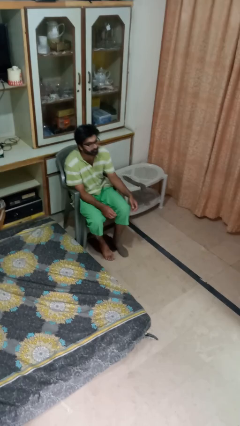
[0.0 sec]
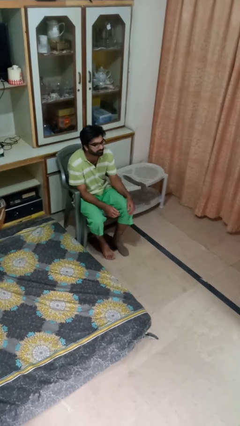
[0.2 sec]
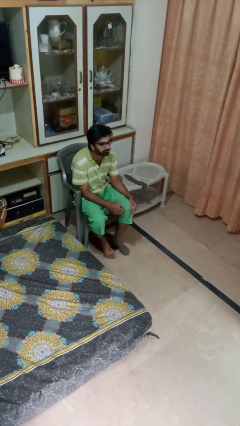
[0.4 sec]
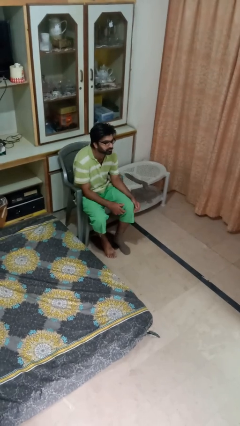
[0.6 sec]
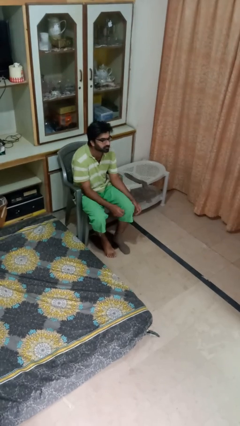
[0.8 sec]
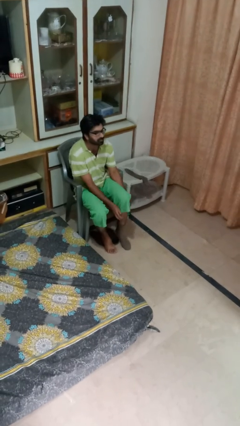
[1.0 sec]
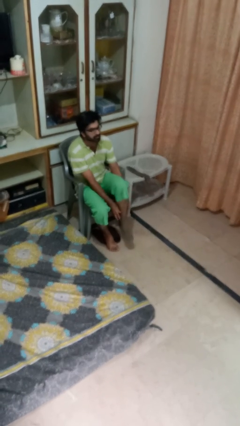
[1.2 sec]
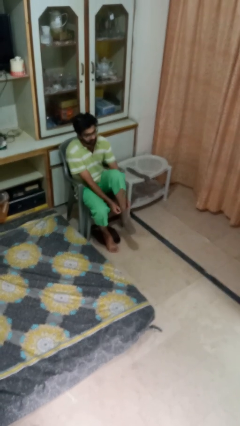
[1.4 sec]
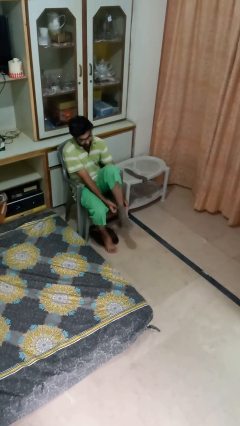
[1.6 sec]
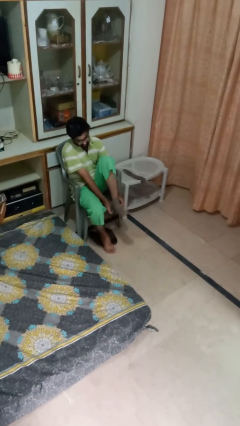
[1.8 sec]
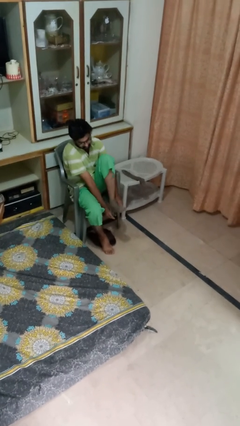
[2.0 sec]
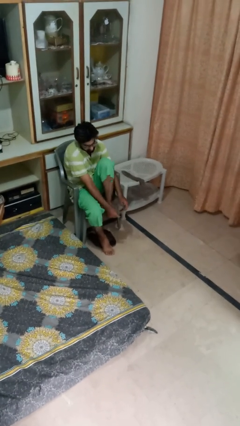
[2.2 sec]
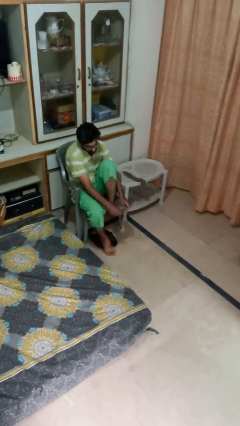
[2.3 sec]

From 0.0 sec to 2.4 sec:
person takes off socks

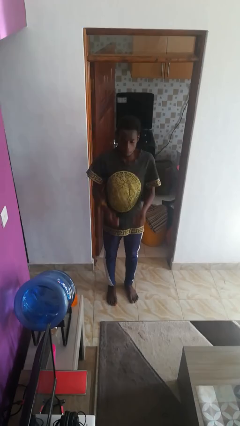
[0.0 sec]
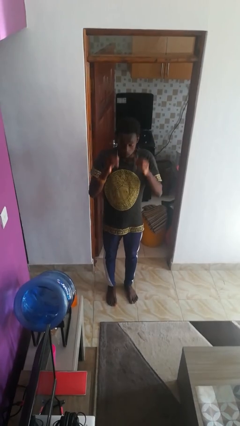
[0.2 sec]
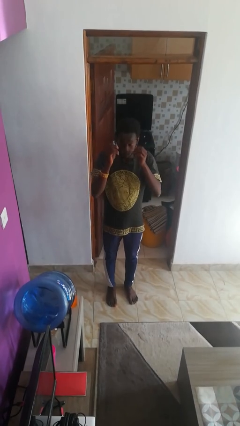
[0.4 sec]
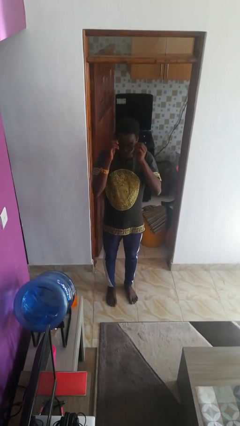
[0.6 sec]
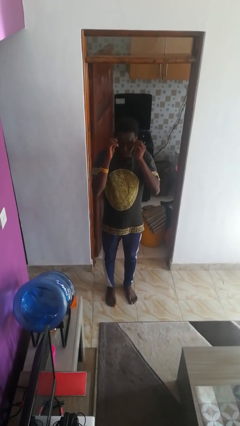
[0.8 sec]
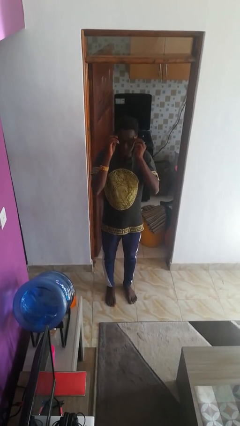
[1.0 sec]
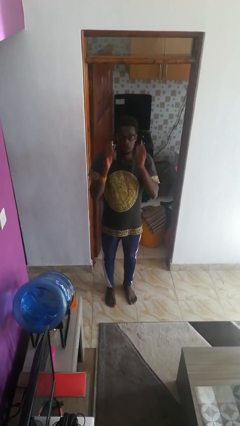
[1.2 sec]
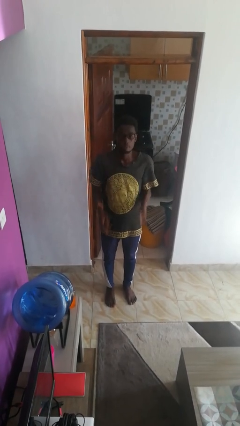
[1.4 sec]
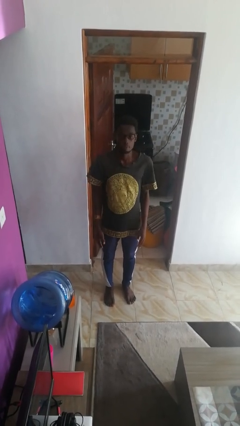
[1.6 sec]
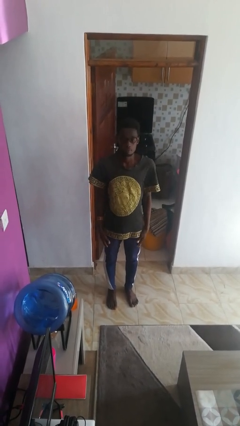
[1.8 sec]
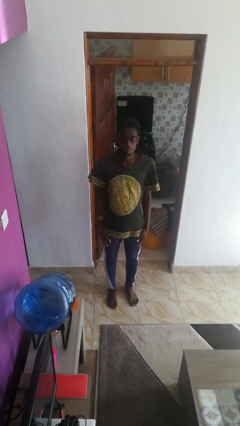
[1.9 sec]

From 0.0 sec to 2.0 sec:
person puts on glasses

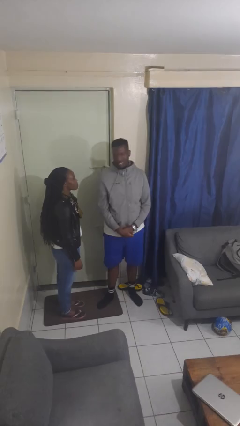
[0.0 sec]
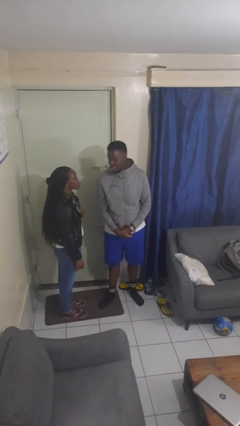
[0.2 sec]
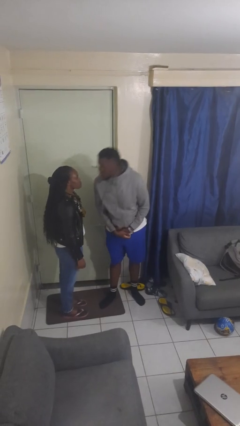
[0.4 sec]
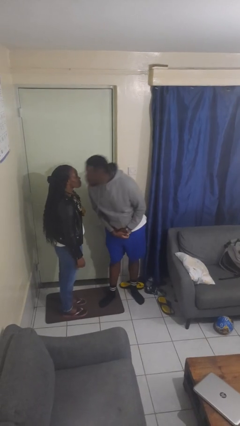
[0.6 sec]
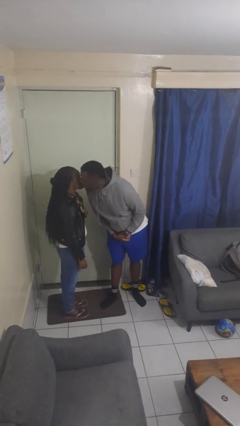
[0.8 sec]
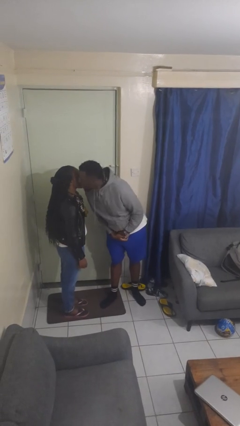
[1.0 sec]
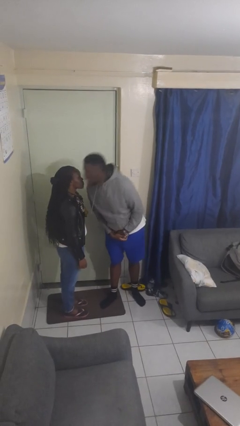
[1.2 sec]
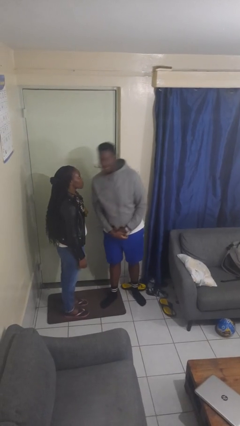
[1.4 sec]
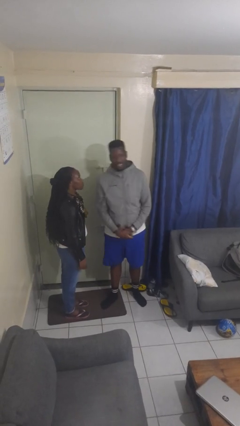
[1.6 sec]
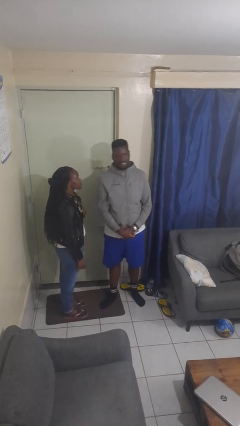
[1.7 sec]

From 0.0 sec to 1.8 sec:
person kisses cheek of person

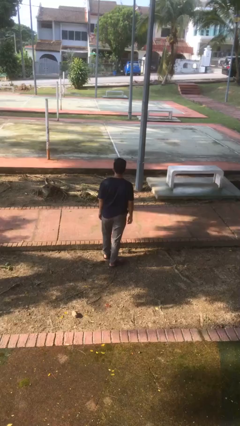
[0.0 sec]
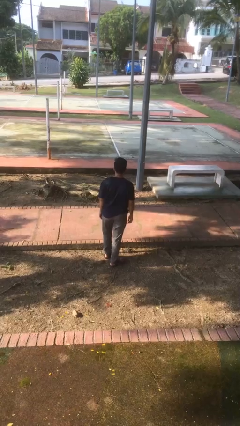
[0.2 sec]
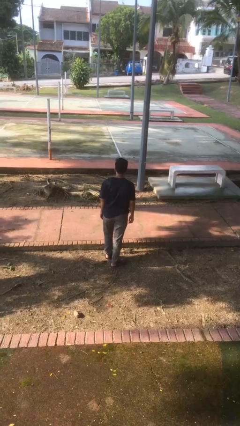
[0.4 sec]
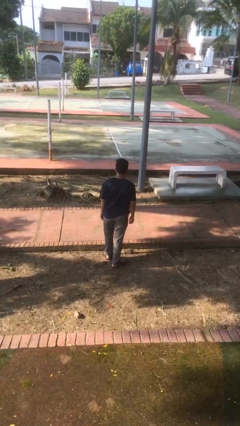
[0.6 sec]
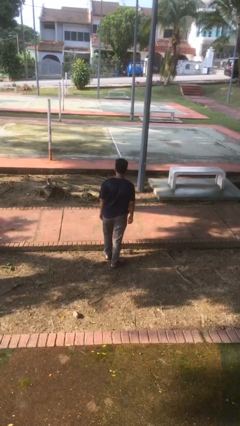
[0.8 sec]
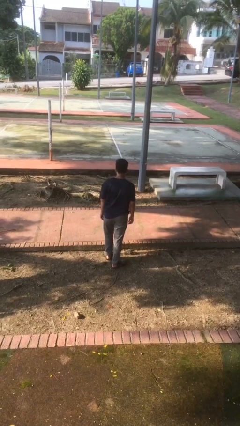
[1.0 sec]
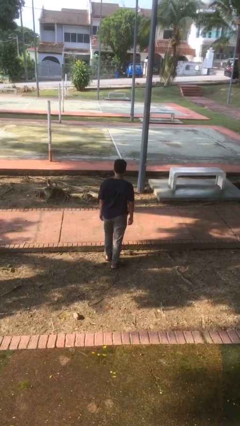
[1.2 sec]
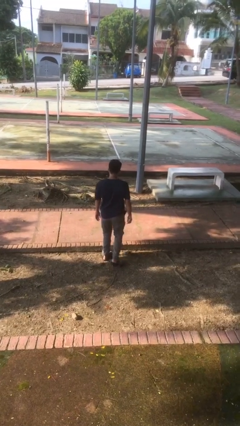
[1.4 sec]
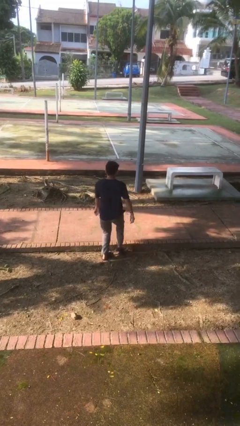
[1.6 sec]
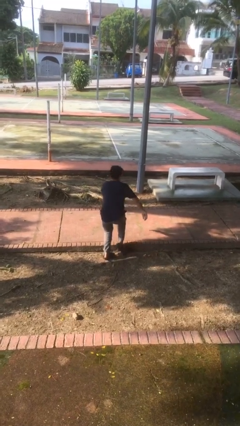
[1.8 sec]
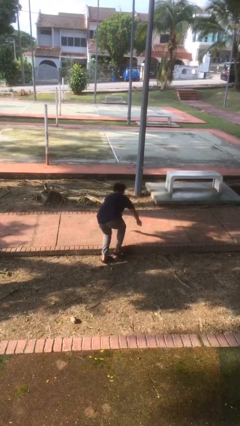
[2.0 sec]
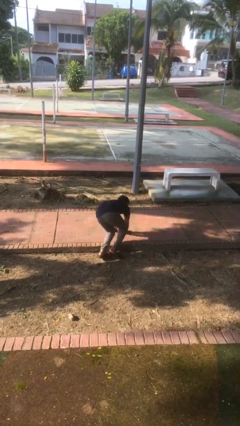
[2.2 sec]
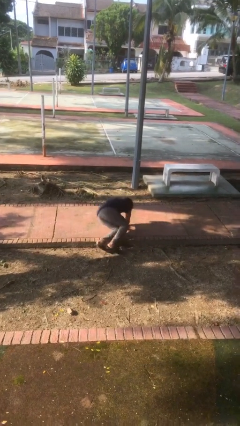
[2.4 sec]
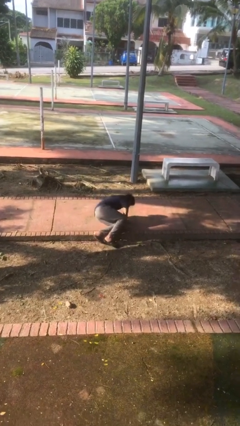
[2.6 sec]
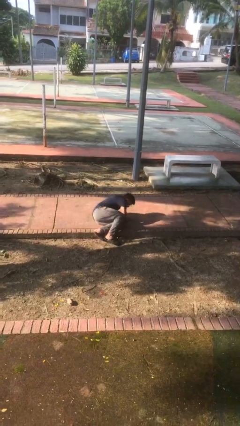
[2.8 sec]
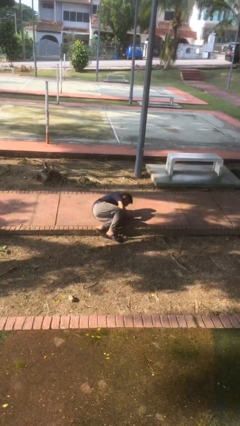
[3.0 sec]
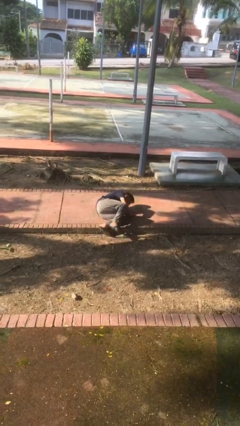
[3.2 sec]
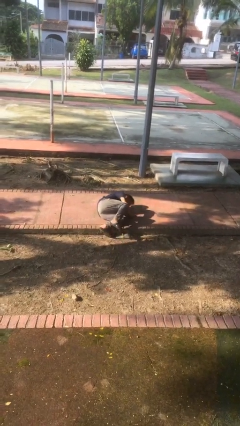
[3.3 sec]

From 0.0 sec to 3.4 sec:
person trips on object on floor

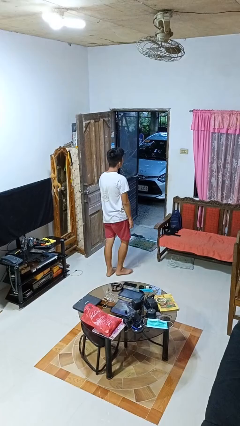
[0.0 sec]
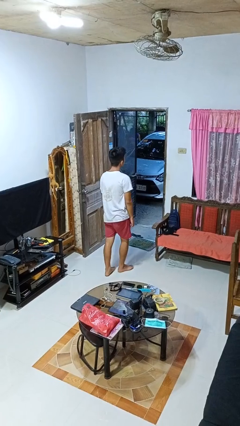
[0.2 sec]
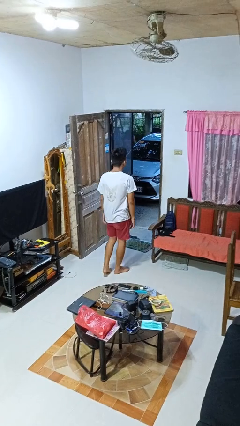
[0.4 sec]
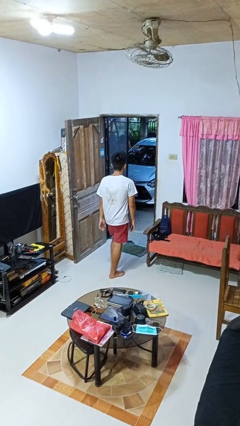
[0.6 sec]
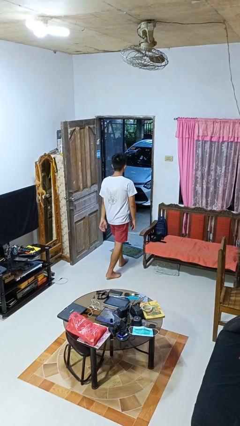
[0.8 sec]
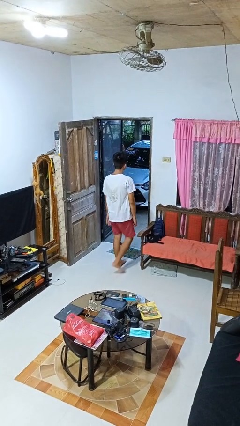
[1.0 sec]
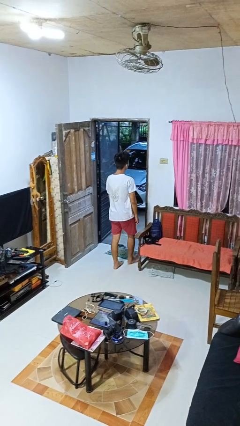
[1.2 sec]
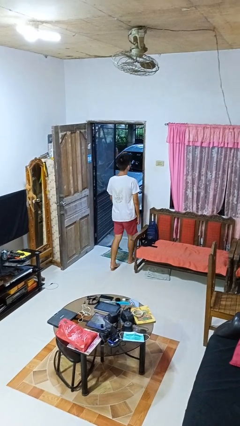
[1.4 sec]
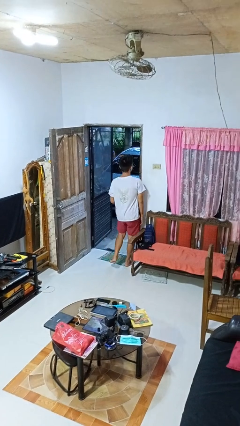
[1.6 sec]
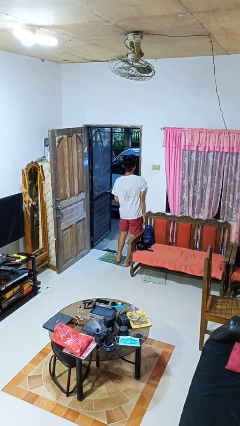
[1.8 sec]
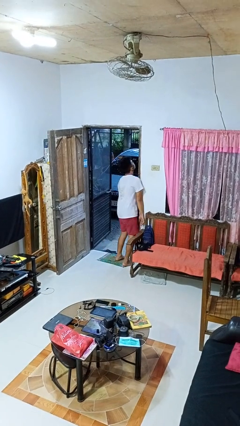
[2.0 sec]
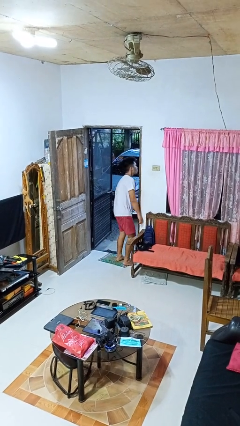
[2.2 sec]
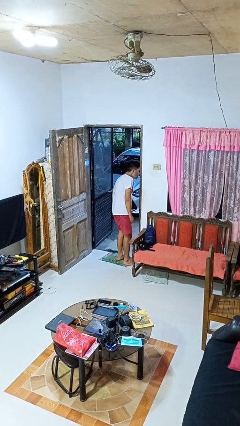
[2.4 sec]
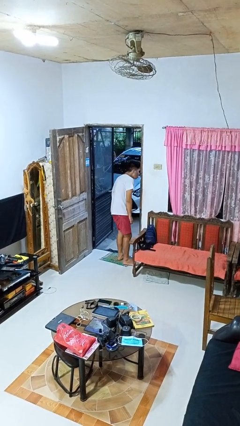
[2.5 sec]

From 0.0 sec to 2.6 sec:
person bumps into wall

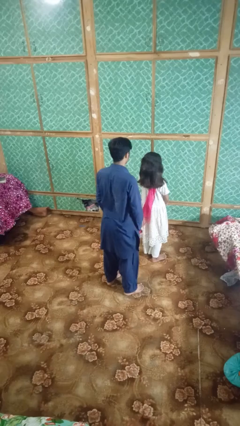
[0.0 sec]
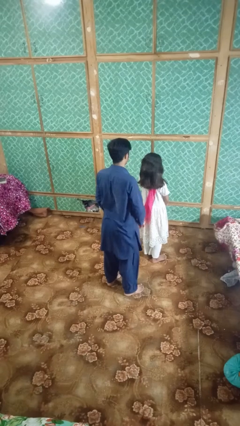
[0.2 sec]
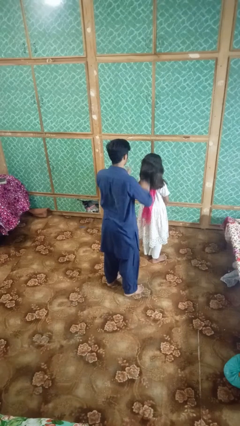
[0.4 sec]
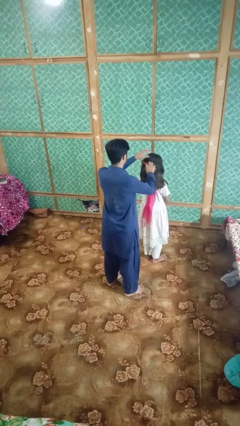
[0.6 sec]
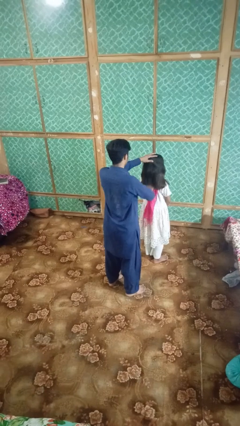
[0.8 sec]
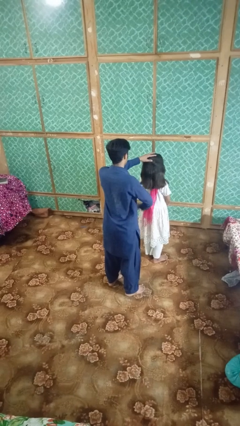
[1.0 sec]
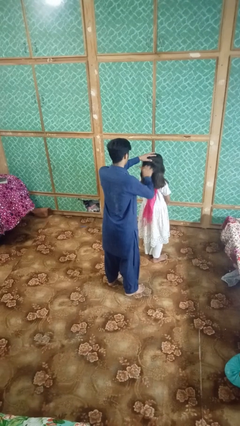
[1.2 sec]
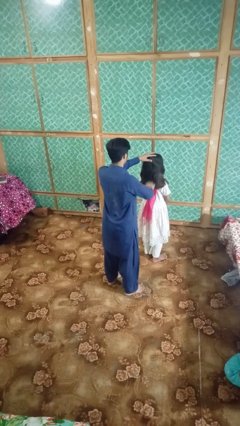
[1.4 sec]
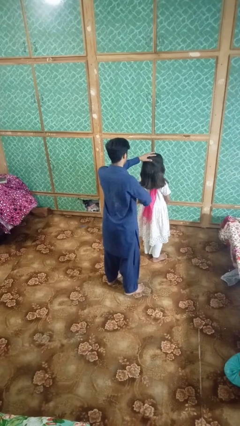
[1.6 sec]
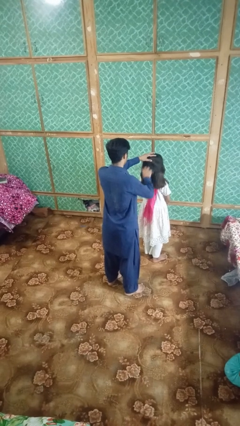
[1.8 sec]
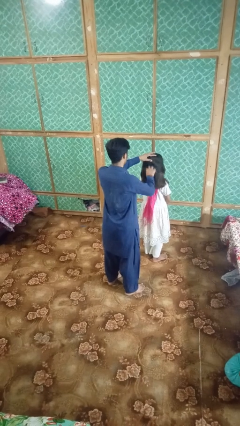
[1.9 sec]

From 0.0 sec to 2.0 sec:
person brushes hair of person

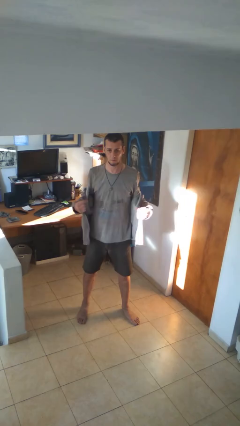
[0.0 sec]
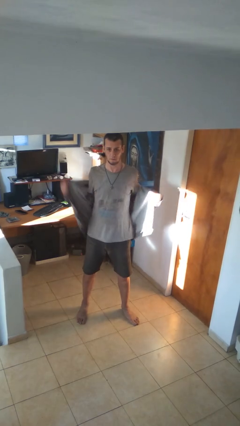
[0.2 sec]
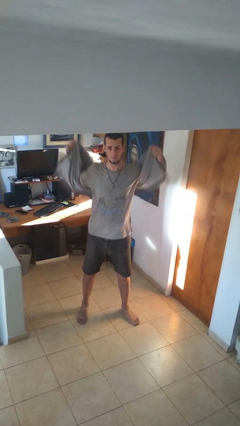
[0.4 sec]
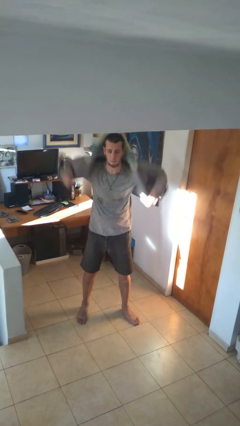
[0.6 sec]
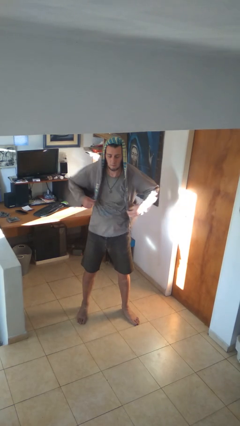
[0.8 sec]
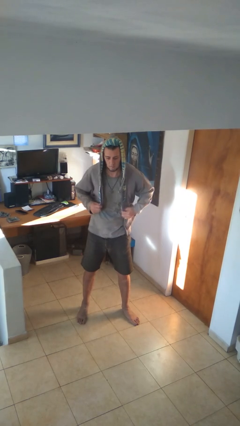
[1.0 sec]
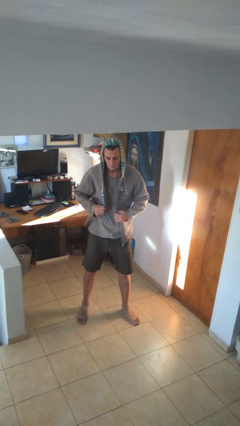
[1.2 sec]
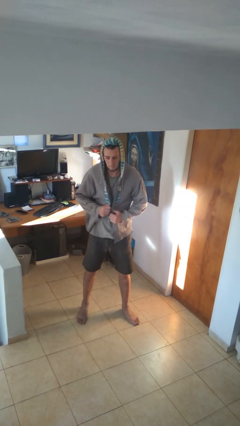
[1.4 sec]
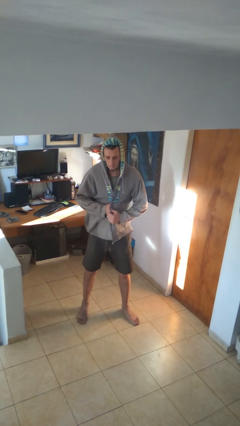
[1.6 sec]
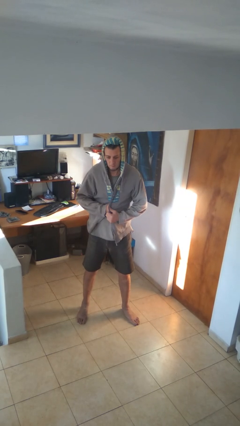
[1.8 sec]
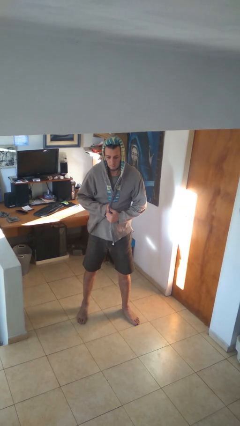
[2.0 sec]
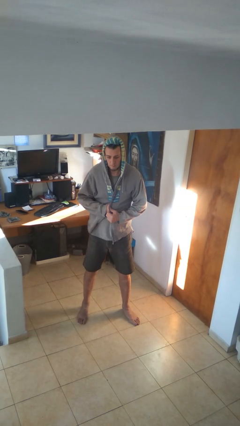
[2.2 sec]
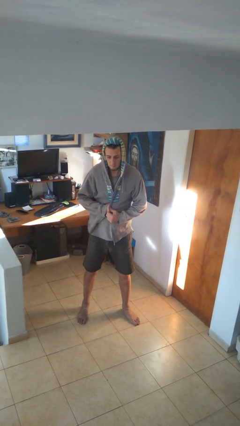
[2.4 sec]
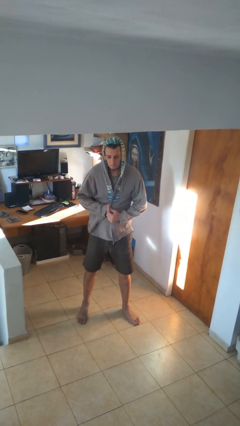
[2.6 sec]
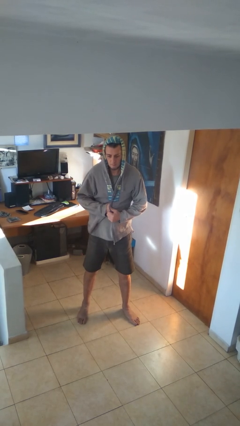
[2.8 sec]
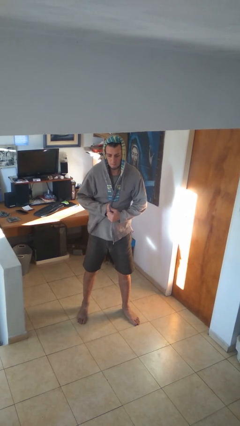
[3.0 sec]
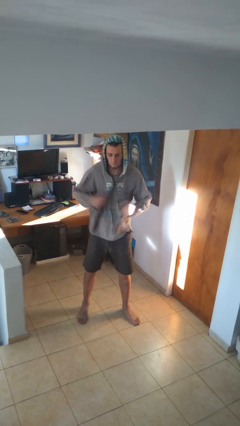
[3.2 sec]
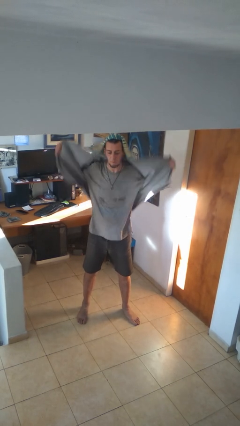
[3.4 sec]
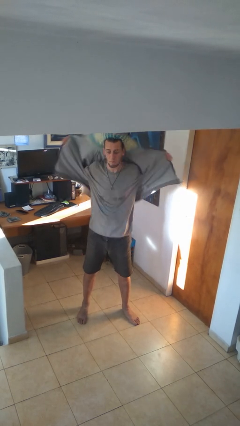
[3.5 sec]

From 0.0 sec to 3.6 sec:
person puts on hoodie
